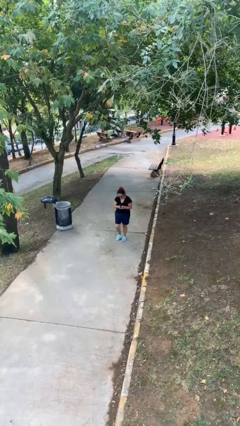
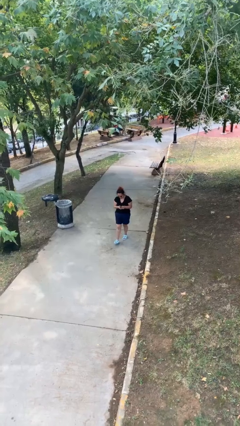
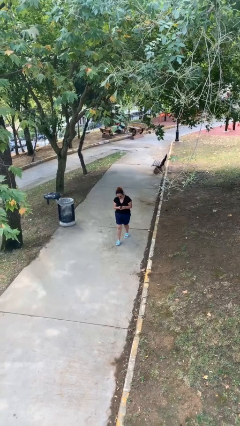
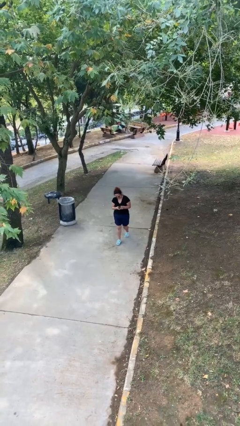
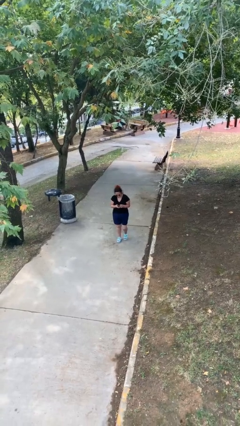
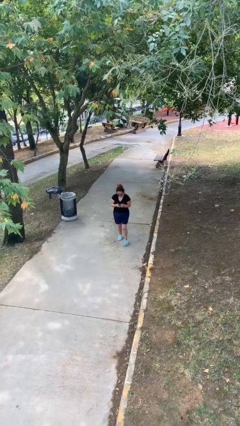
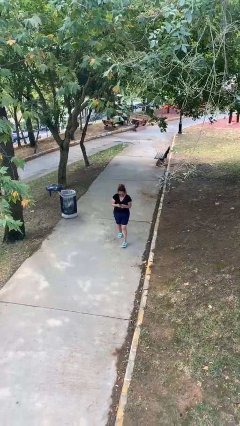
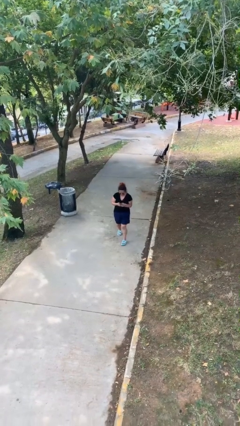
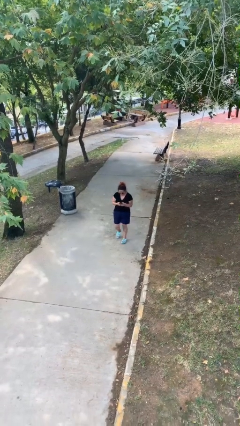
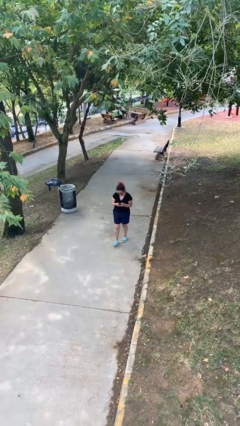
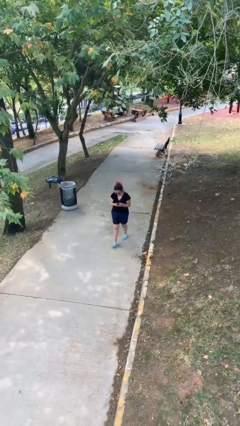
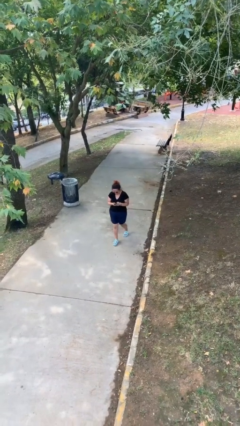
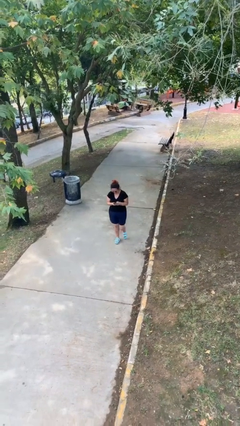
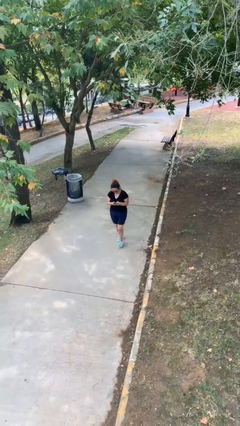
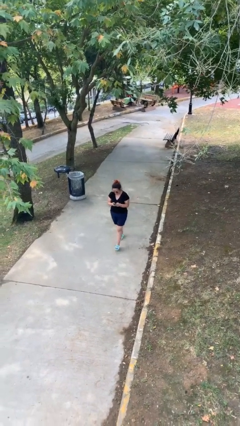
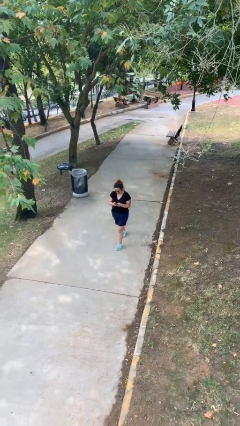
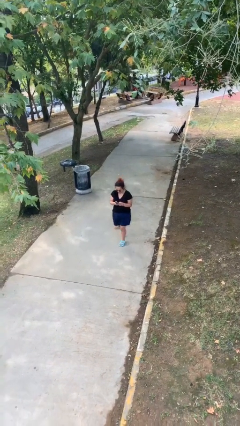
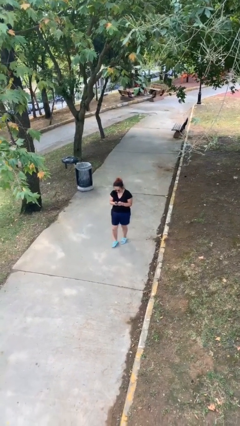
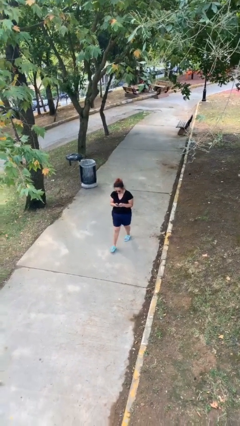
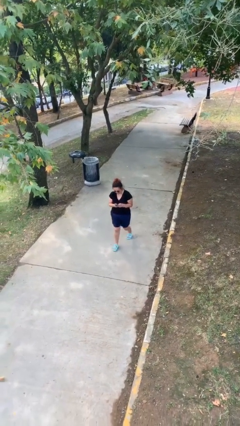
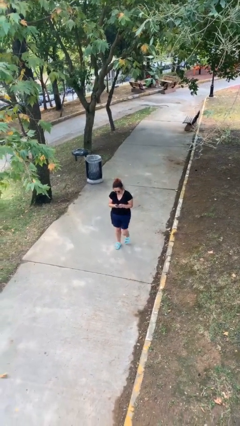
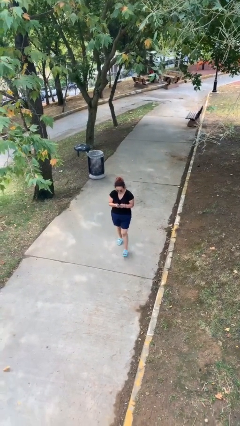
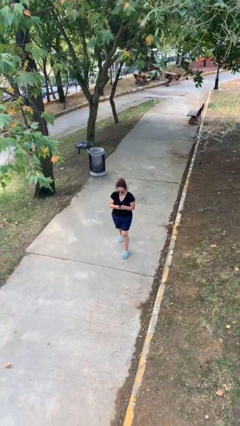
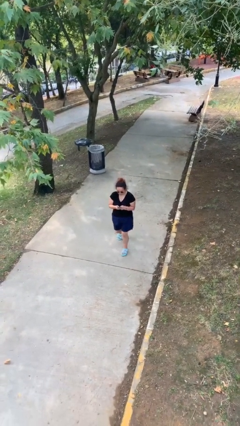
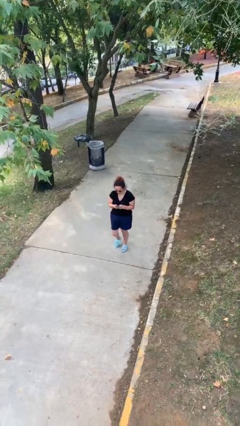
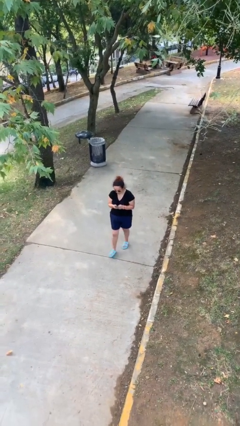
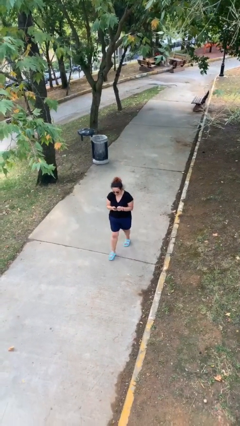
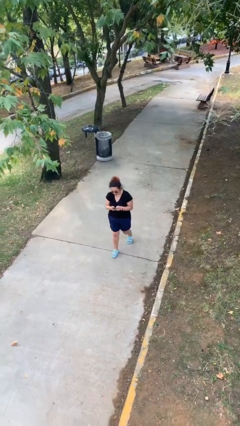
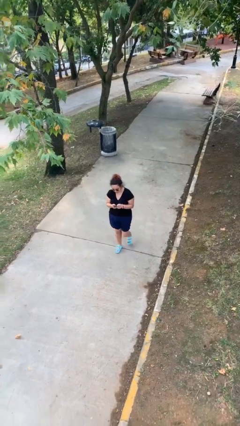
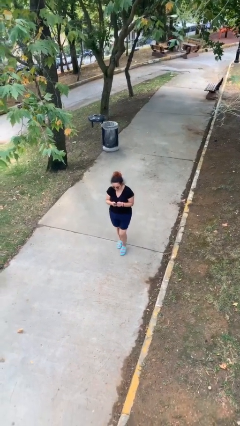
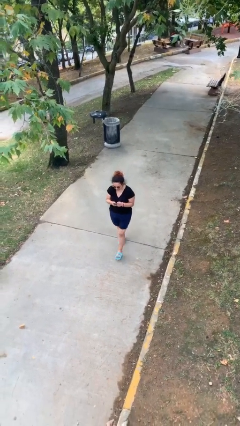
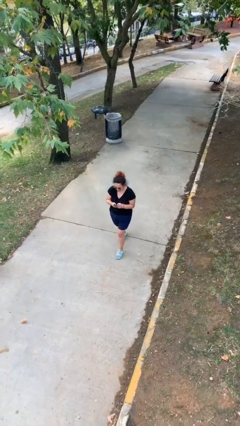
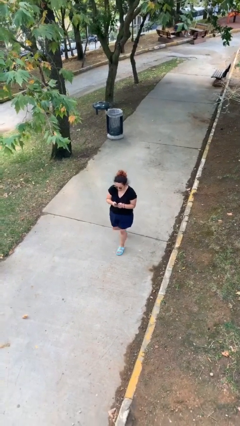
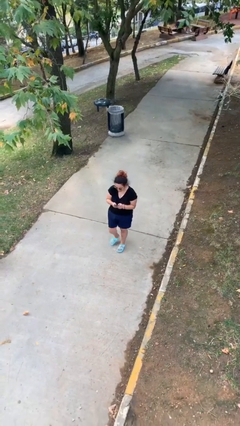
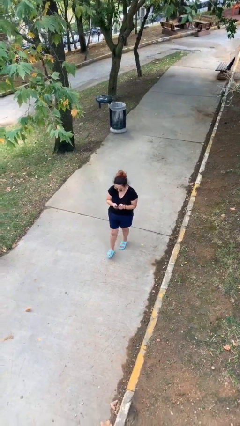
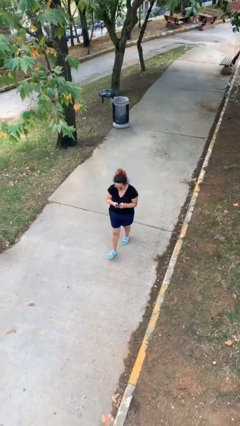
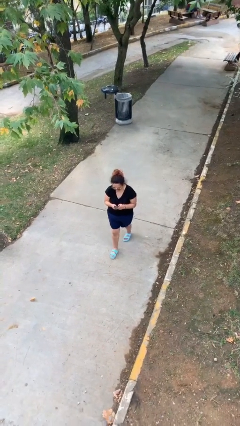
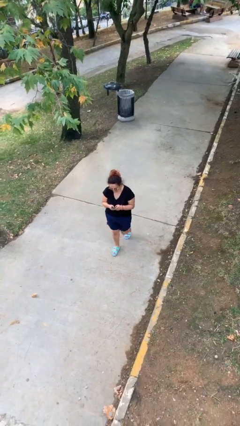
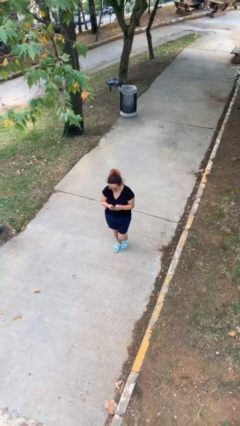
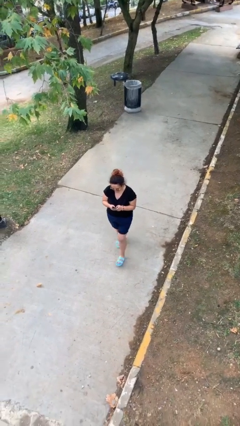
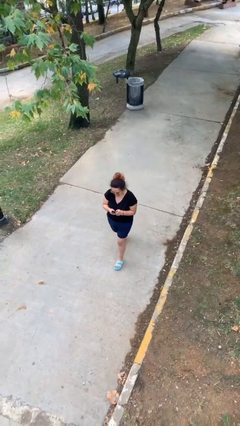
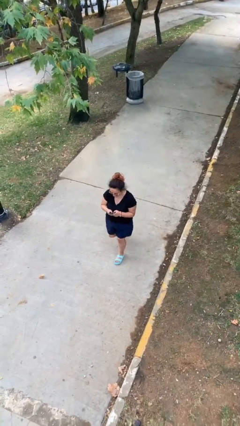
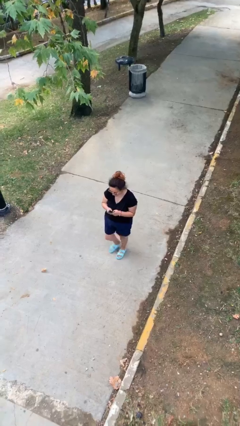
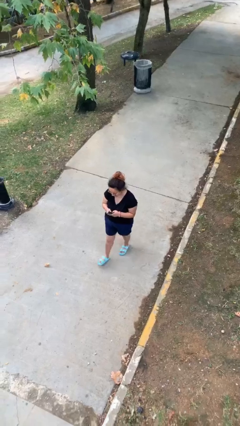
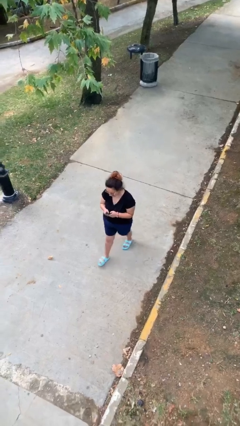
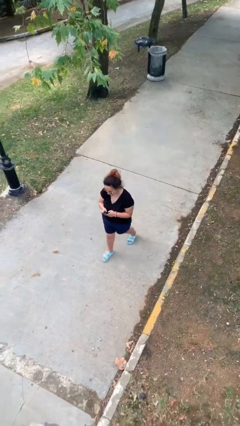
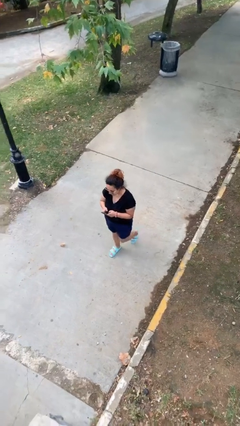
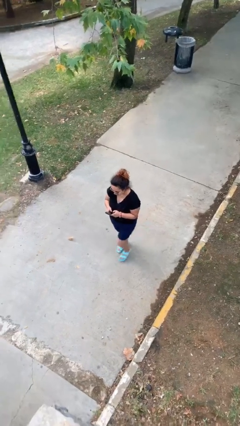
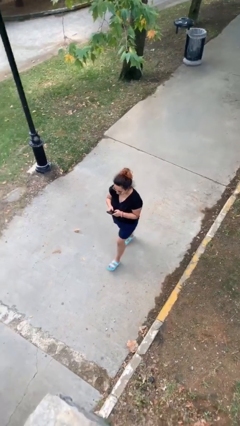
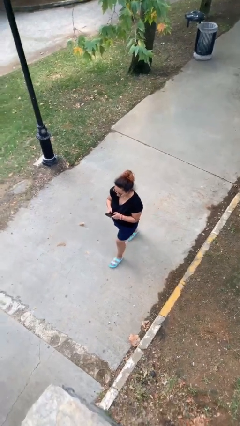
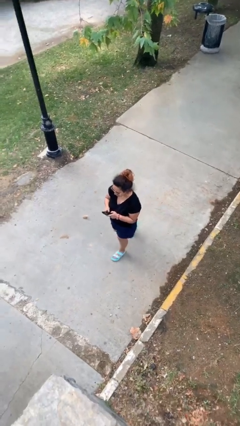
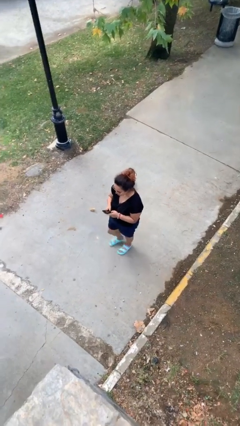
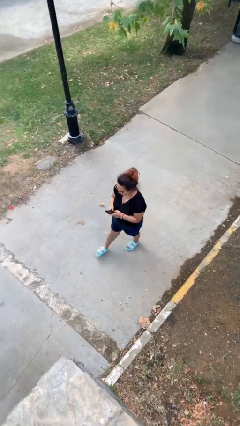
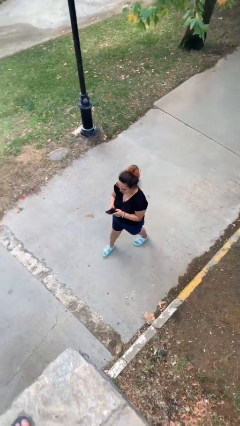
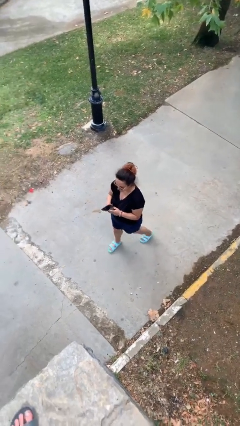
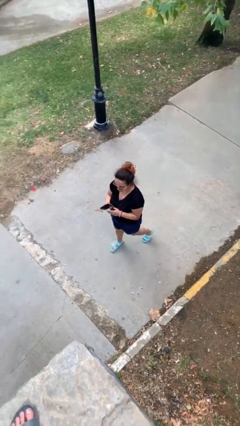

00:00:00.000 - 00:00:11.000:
person texts on phone

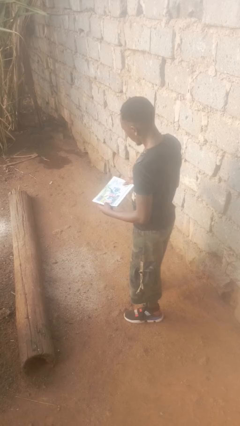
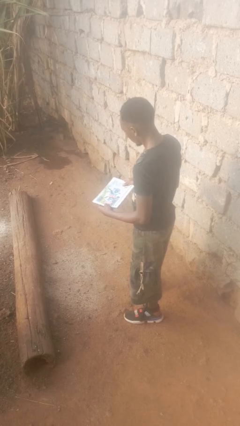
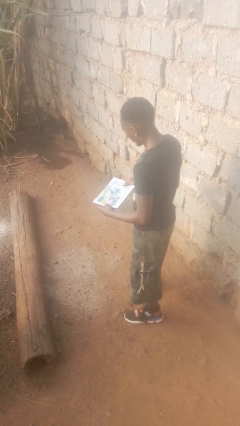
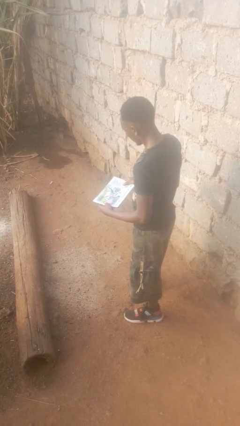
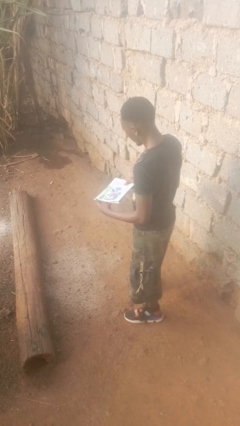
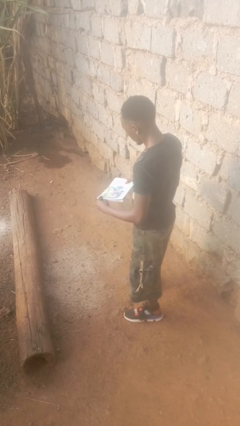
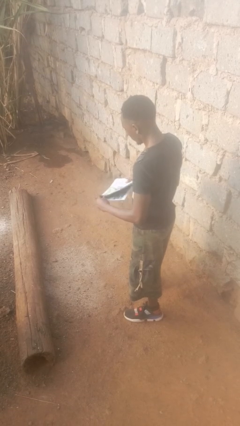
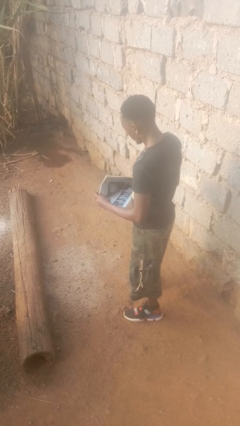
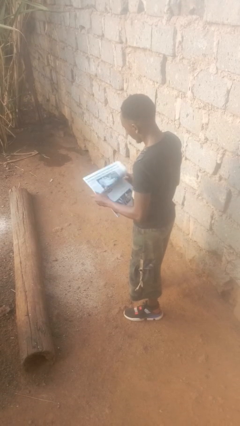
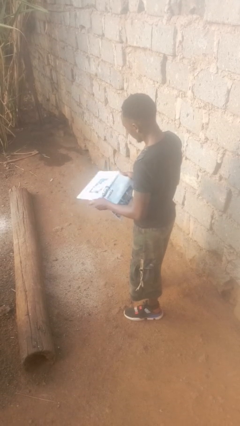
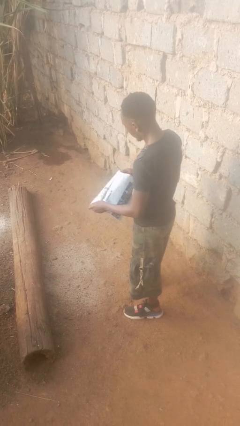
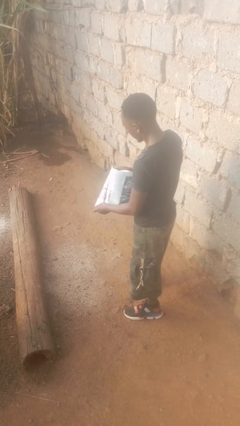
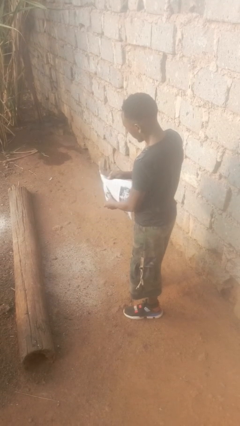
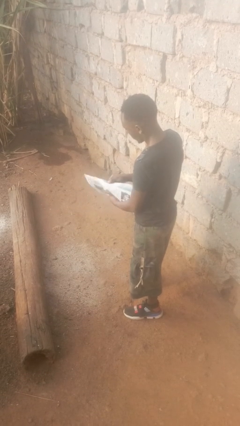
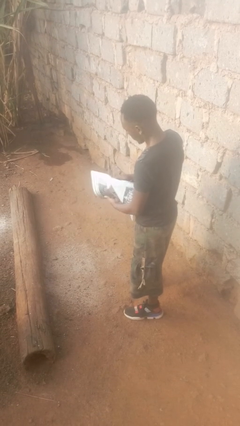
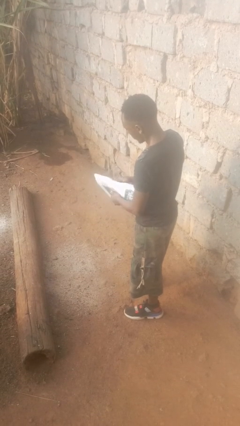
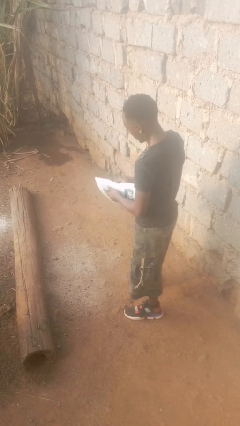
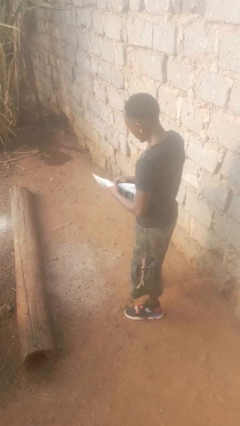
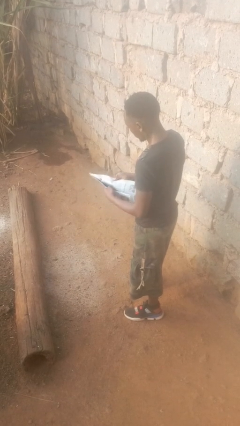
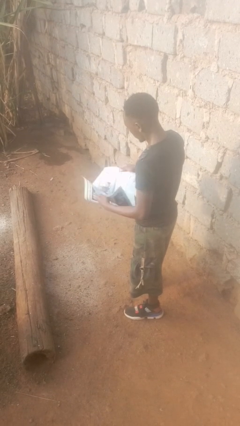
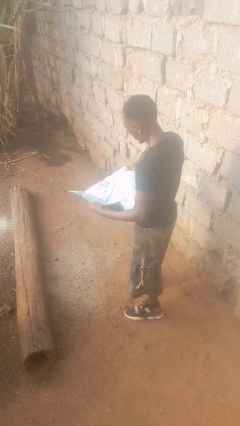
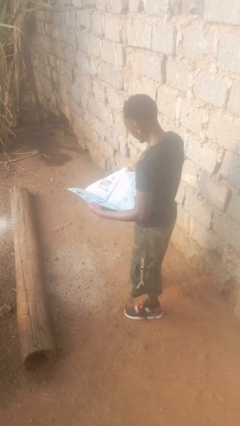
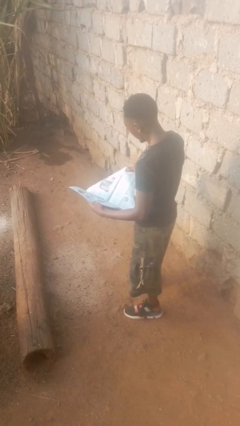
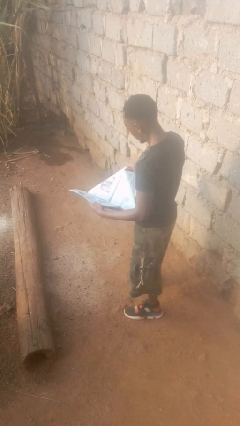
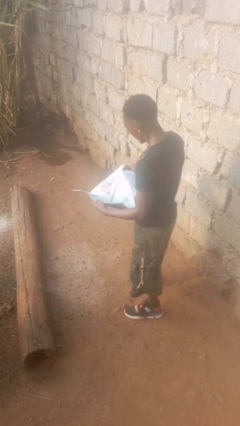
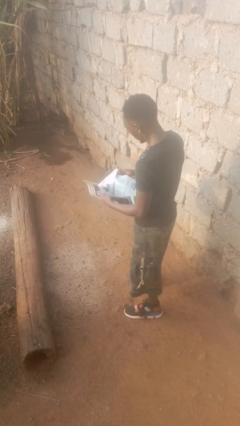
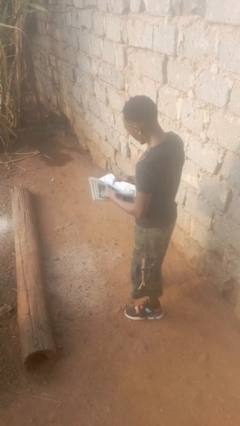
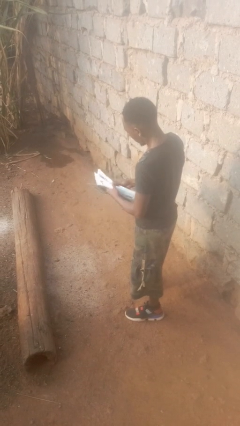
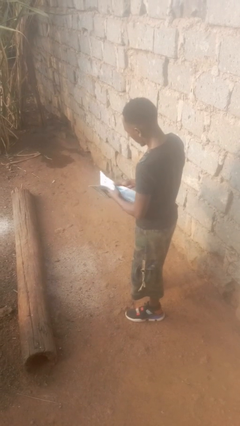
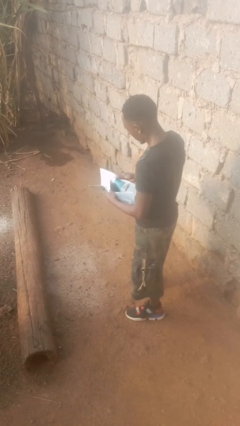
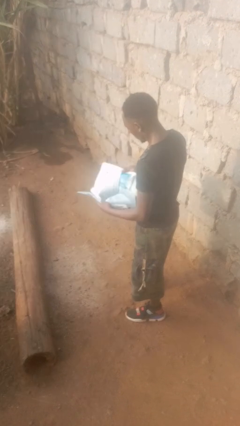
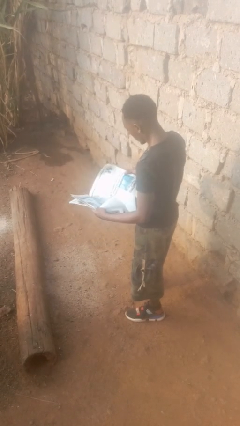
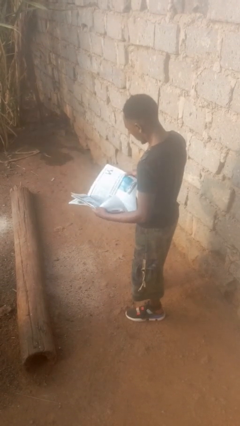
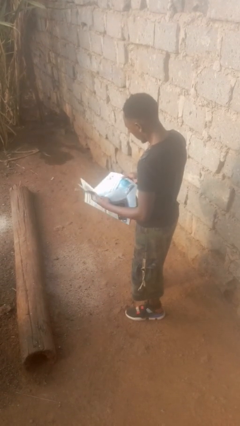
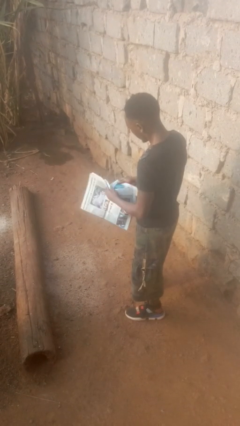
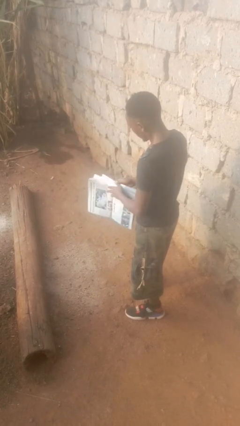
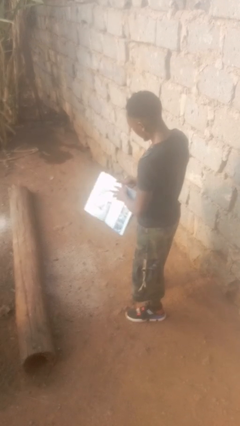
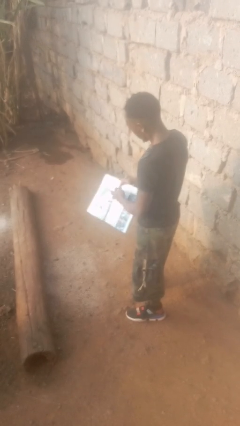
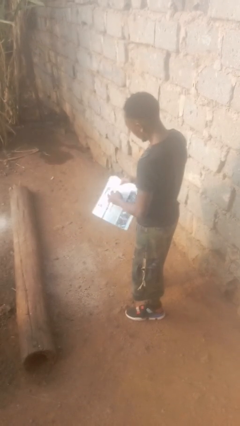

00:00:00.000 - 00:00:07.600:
person reads newspaper
